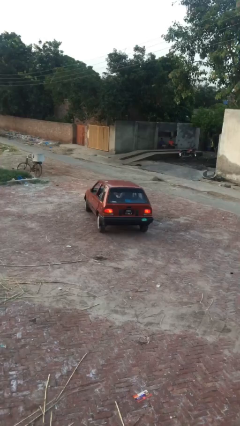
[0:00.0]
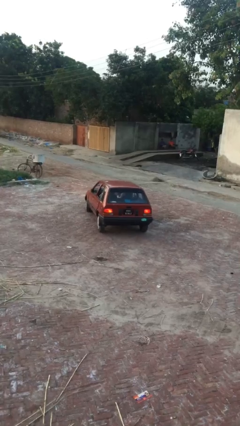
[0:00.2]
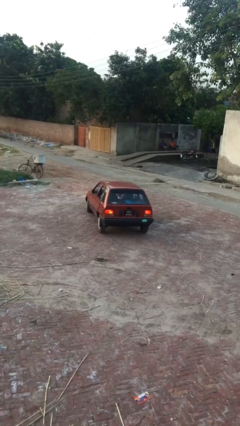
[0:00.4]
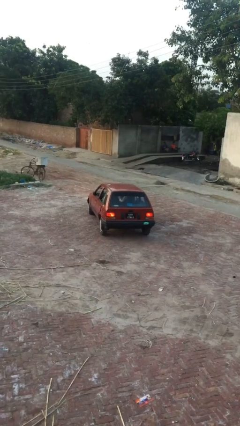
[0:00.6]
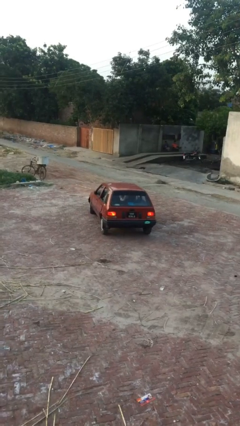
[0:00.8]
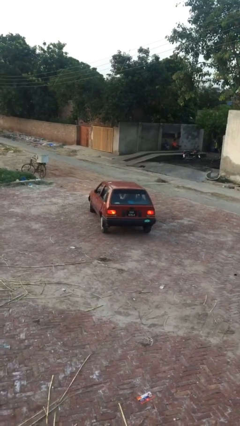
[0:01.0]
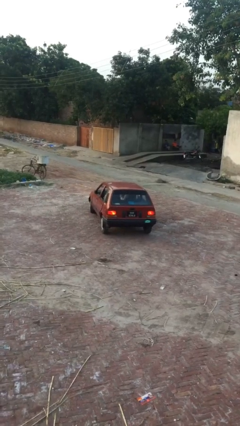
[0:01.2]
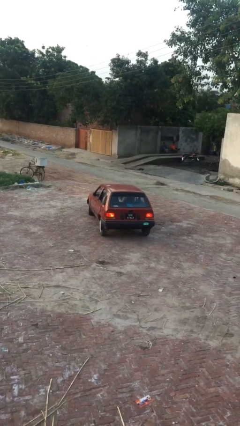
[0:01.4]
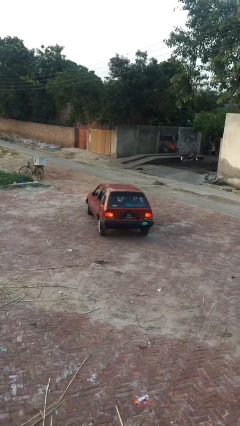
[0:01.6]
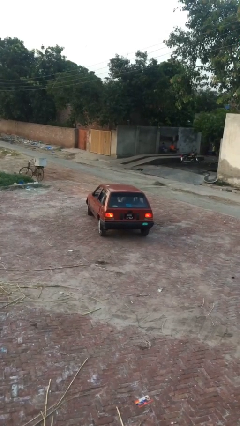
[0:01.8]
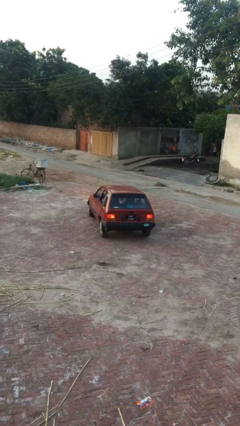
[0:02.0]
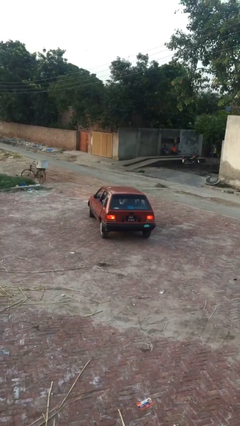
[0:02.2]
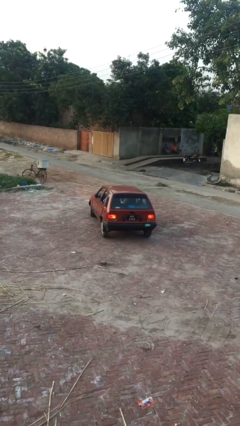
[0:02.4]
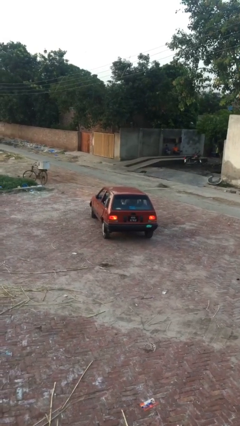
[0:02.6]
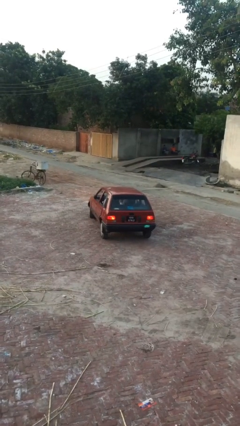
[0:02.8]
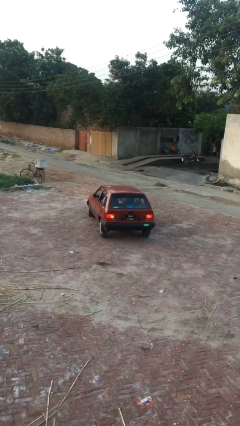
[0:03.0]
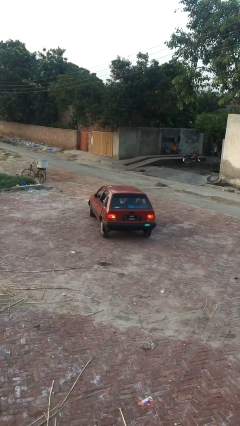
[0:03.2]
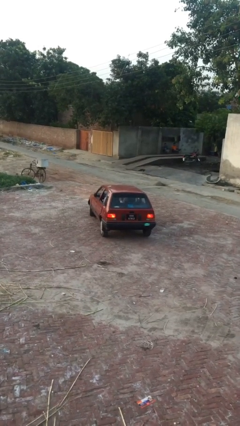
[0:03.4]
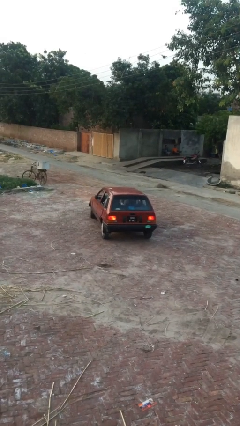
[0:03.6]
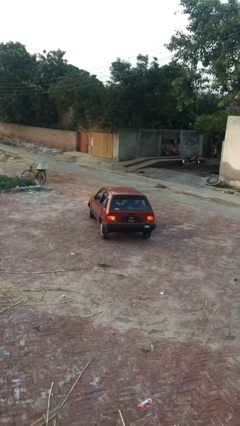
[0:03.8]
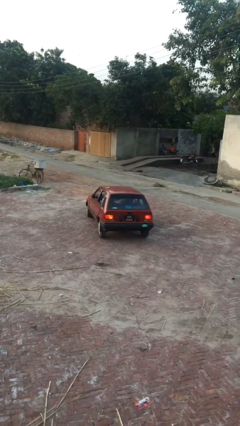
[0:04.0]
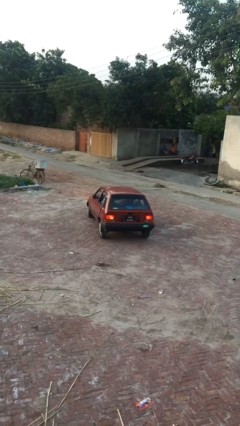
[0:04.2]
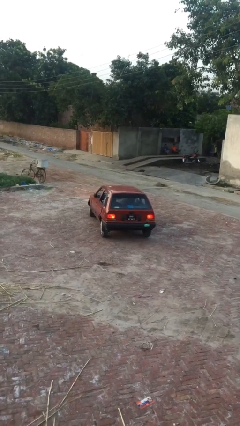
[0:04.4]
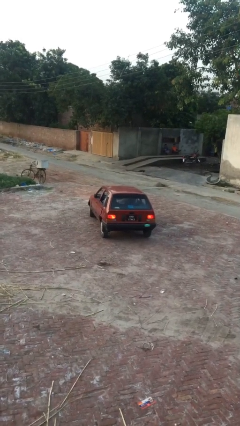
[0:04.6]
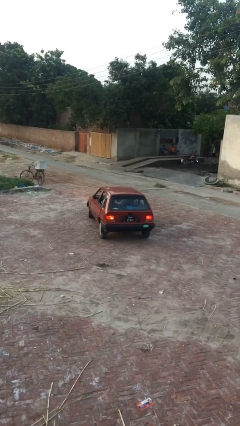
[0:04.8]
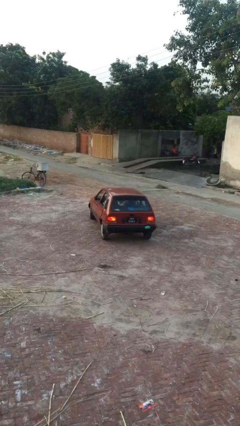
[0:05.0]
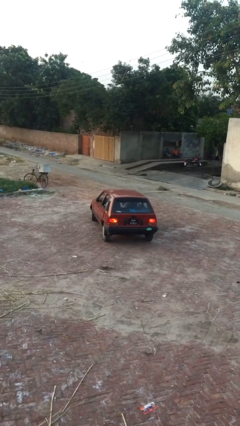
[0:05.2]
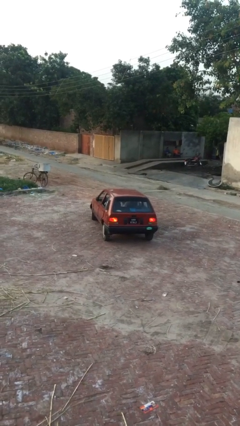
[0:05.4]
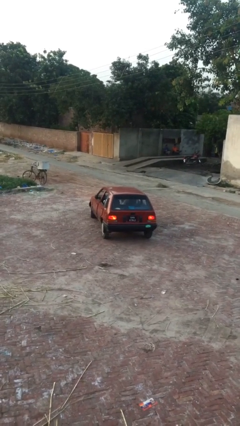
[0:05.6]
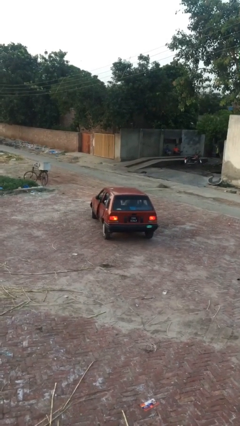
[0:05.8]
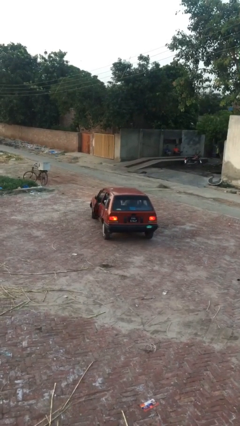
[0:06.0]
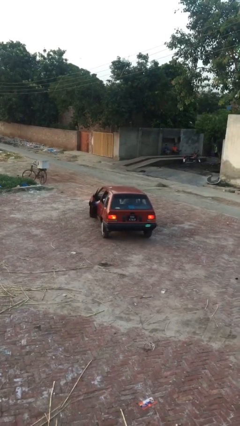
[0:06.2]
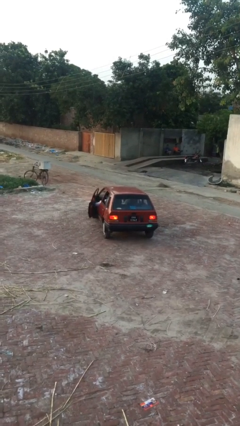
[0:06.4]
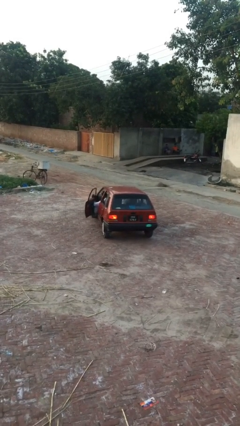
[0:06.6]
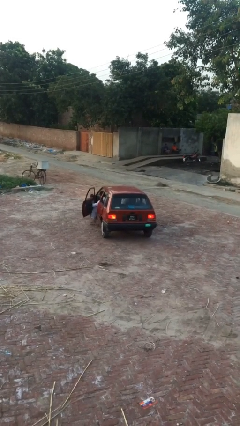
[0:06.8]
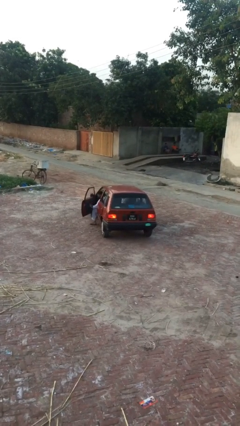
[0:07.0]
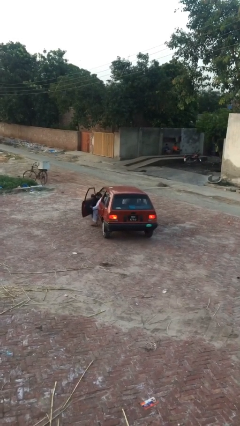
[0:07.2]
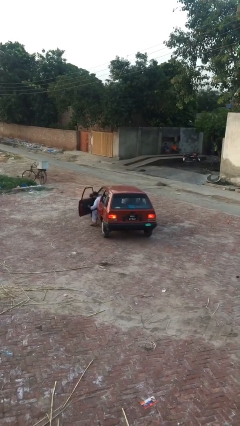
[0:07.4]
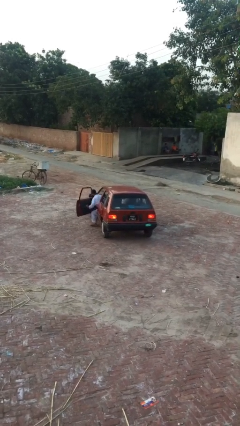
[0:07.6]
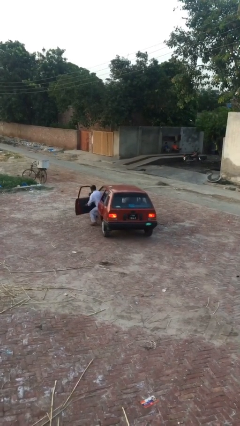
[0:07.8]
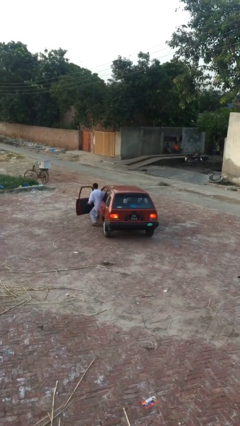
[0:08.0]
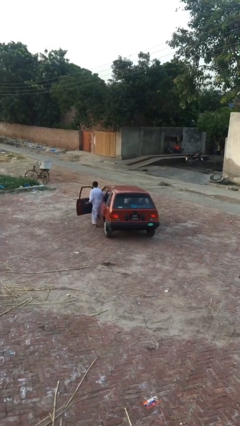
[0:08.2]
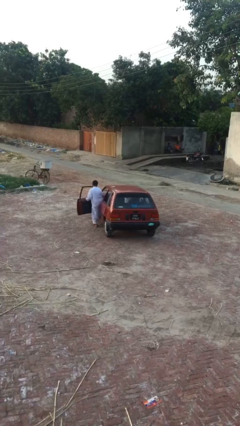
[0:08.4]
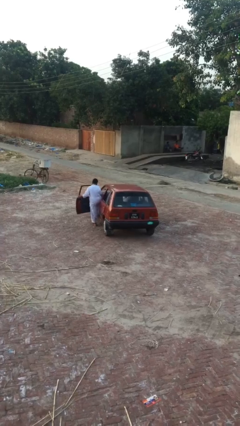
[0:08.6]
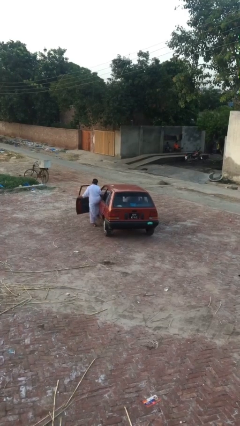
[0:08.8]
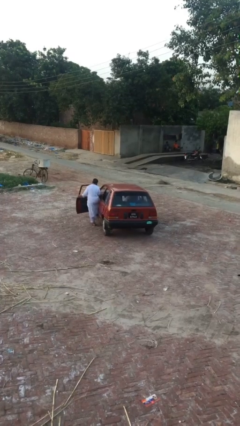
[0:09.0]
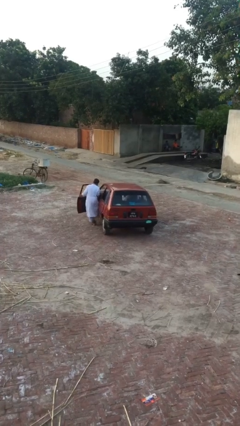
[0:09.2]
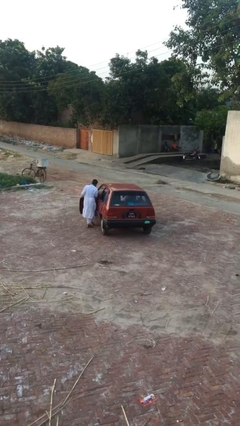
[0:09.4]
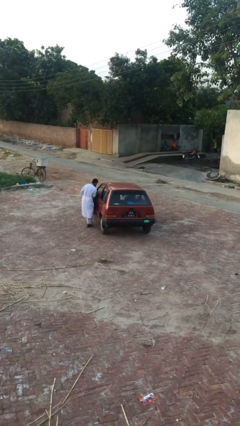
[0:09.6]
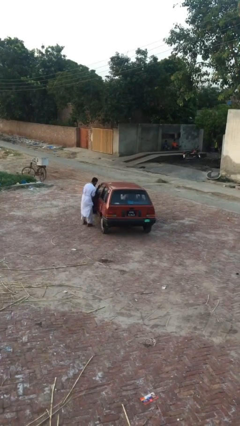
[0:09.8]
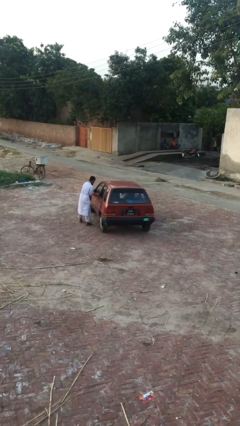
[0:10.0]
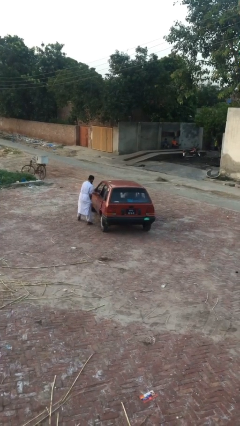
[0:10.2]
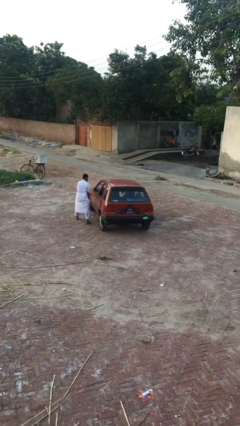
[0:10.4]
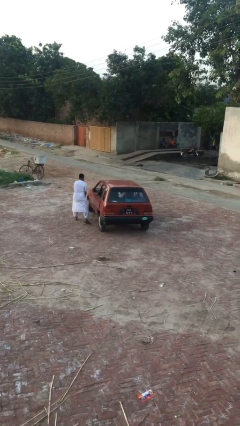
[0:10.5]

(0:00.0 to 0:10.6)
car drops off person

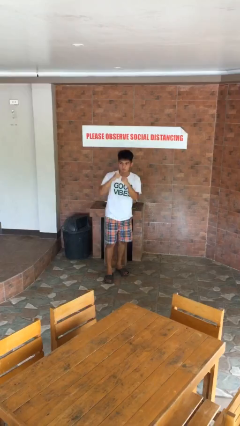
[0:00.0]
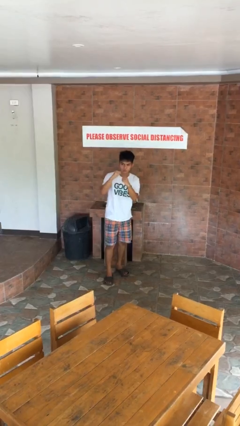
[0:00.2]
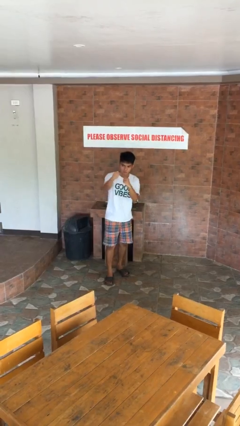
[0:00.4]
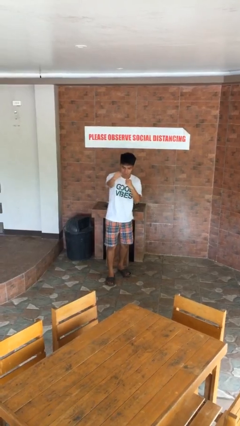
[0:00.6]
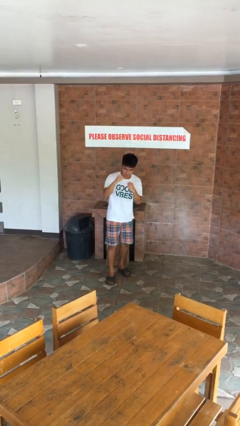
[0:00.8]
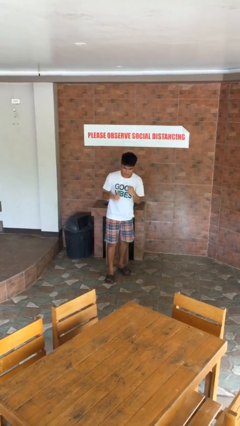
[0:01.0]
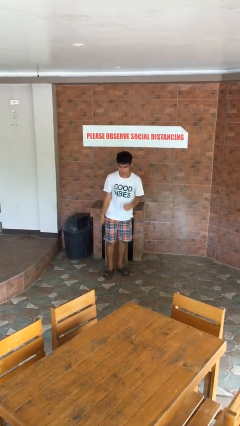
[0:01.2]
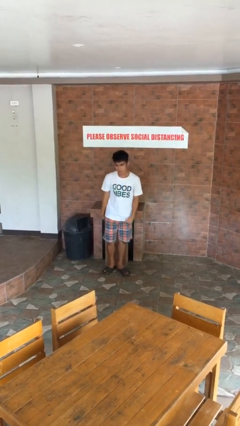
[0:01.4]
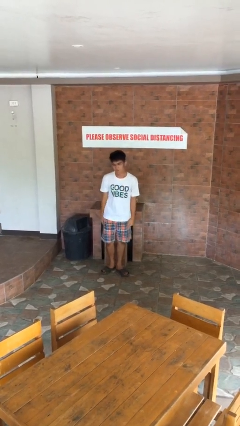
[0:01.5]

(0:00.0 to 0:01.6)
person punches

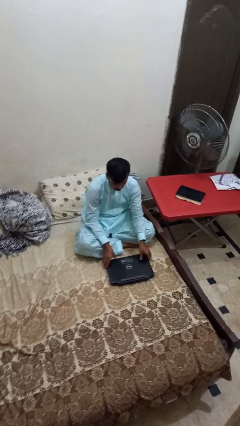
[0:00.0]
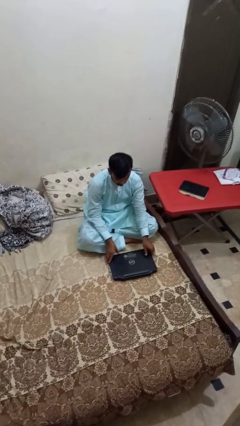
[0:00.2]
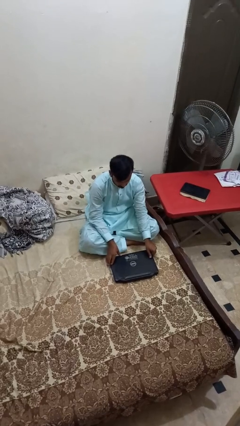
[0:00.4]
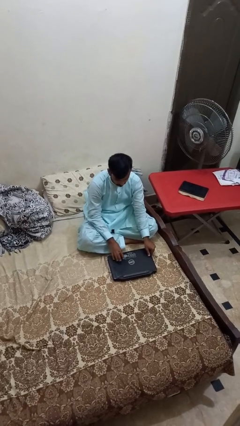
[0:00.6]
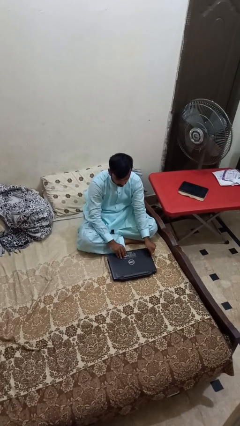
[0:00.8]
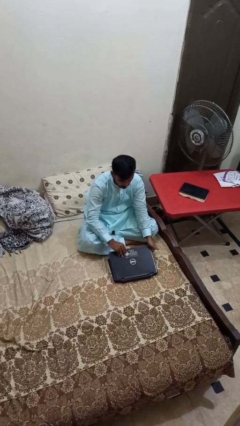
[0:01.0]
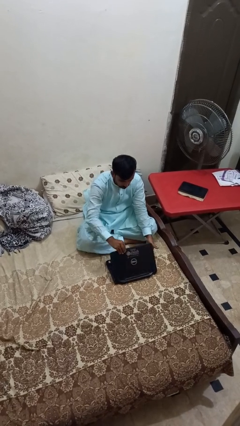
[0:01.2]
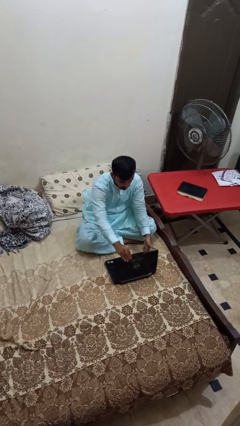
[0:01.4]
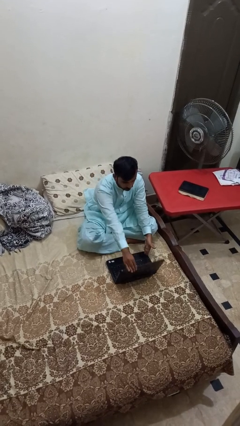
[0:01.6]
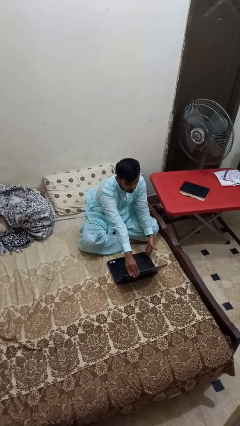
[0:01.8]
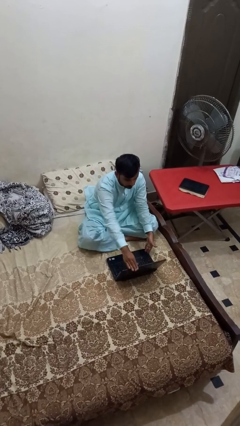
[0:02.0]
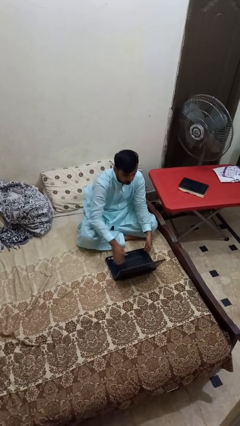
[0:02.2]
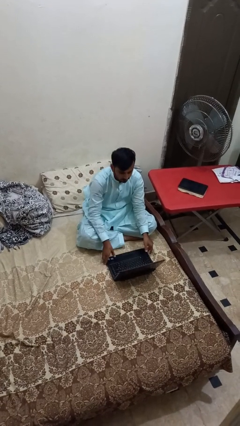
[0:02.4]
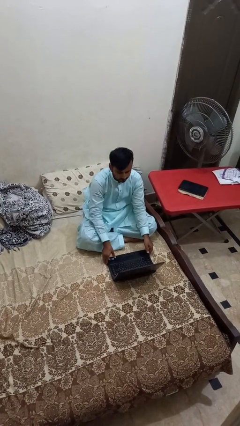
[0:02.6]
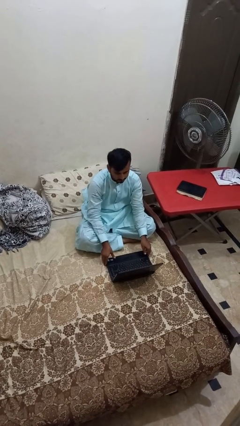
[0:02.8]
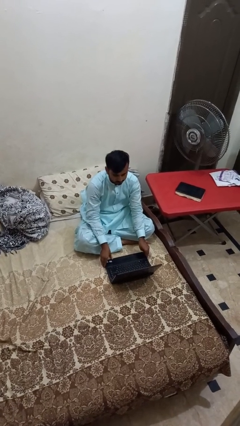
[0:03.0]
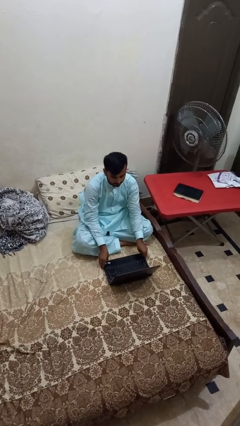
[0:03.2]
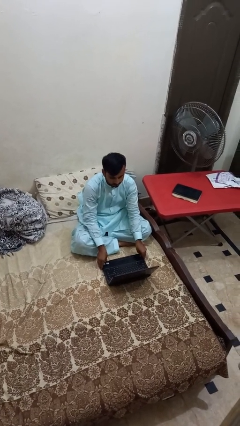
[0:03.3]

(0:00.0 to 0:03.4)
person opens laptop

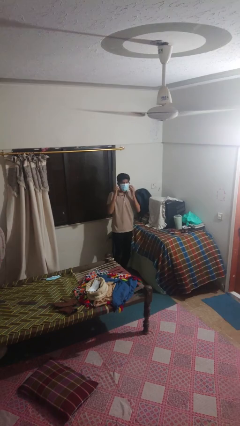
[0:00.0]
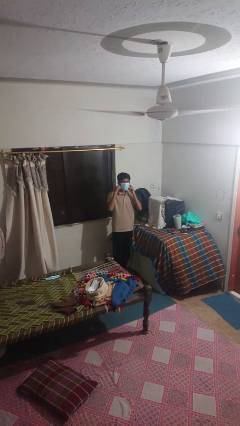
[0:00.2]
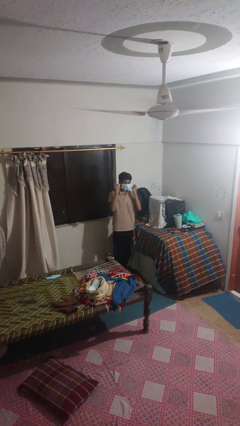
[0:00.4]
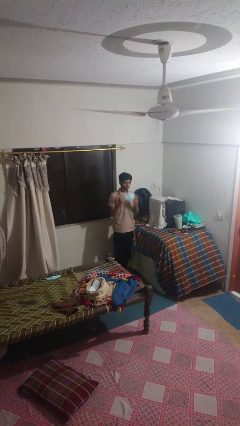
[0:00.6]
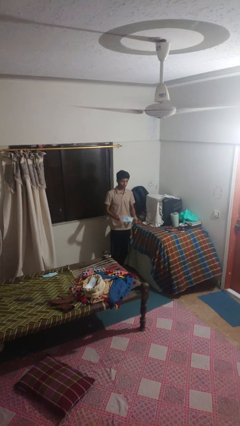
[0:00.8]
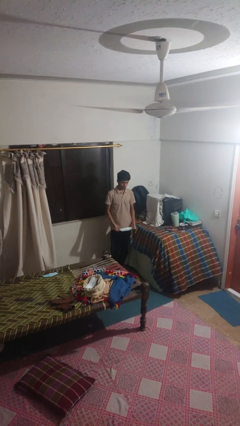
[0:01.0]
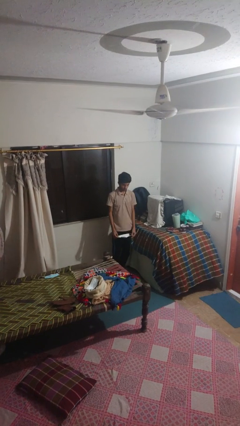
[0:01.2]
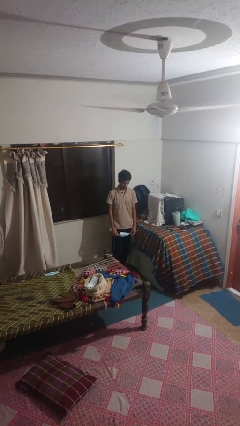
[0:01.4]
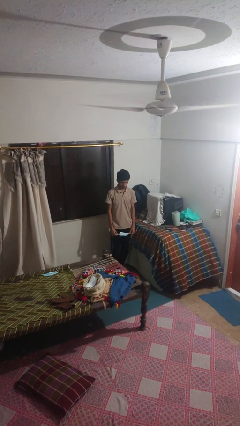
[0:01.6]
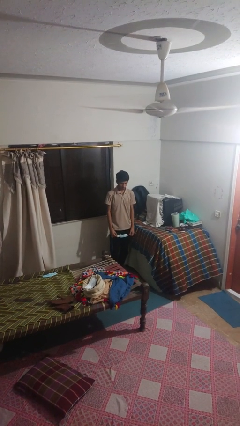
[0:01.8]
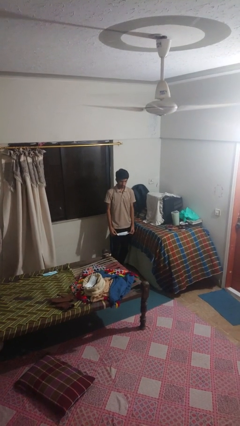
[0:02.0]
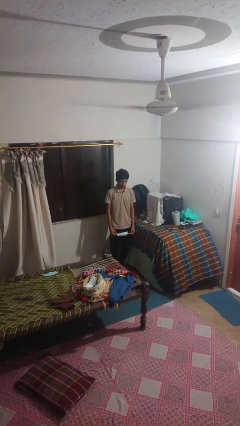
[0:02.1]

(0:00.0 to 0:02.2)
person takes off facemask
